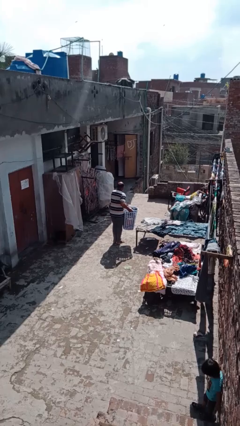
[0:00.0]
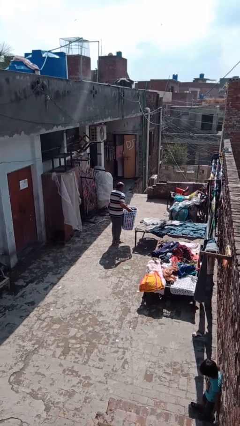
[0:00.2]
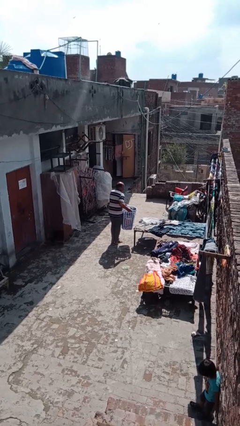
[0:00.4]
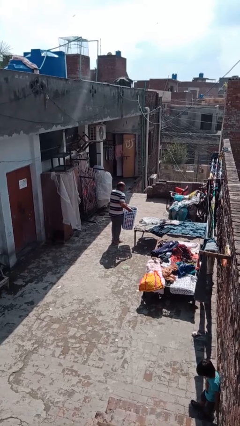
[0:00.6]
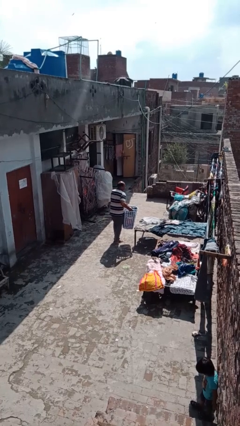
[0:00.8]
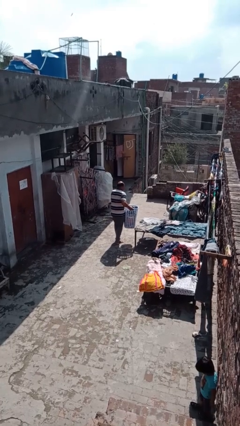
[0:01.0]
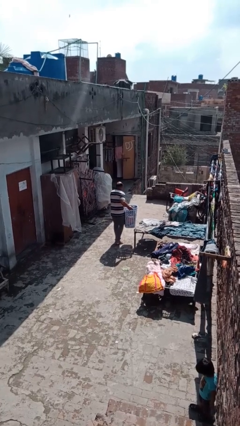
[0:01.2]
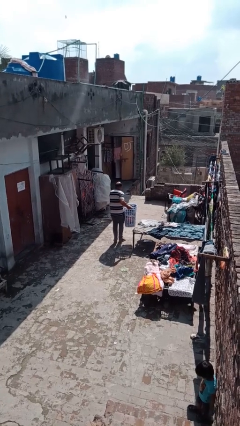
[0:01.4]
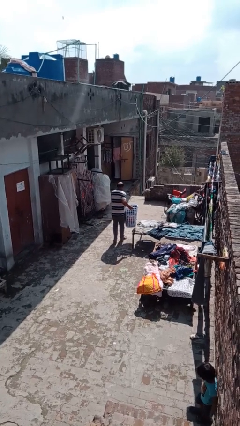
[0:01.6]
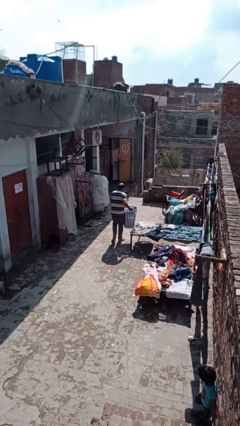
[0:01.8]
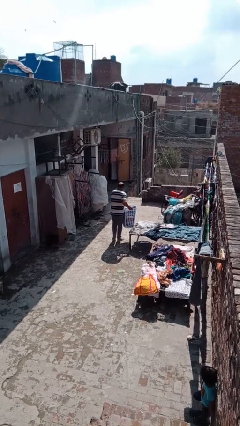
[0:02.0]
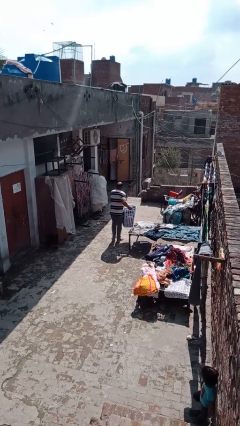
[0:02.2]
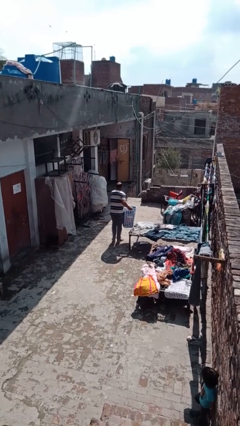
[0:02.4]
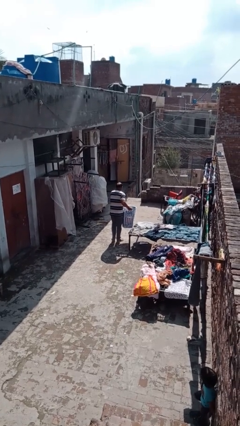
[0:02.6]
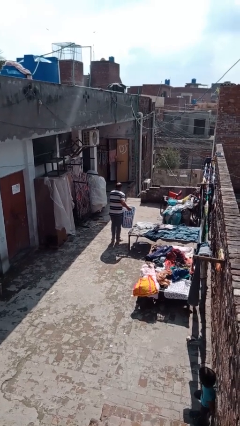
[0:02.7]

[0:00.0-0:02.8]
person carries laundry basket

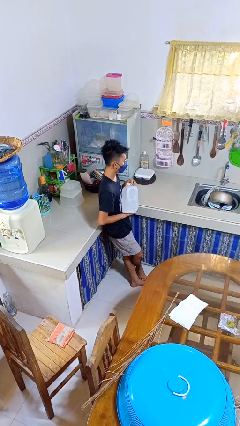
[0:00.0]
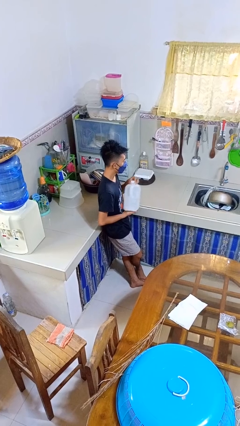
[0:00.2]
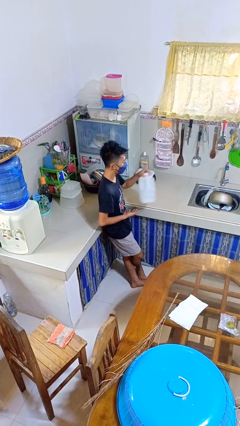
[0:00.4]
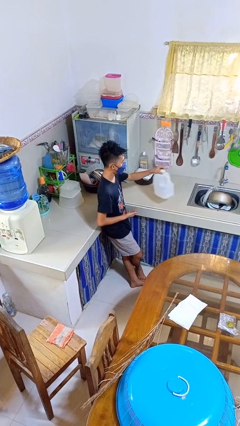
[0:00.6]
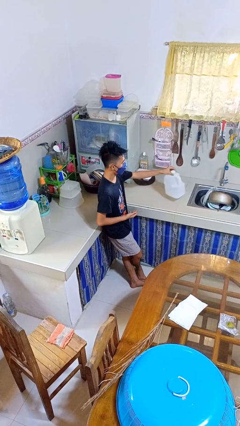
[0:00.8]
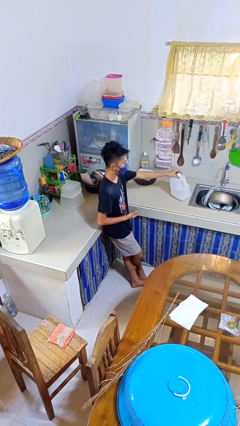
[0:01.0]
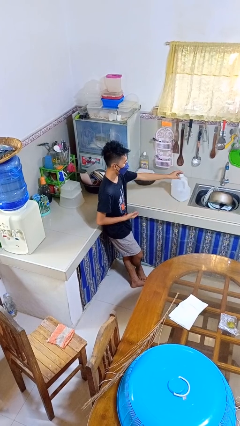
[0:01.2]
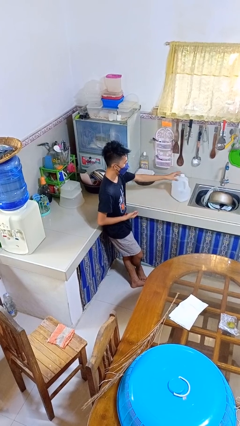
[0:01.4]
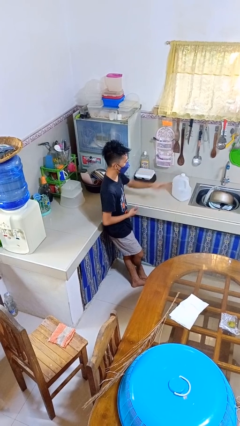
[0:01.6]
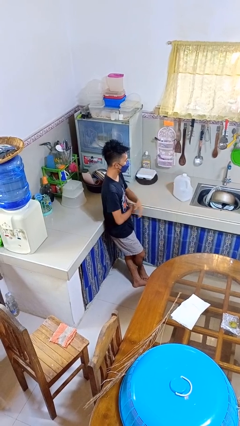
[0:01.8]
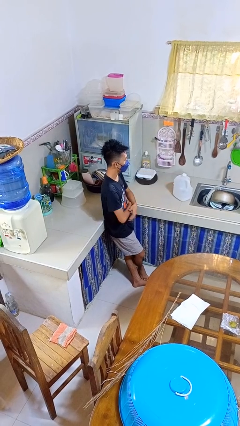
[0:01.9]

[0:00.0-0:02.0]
person puts down object on countertop

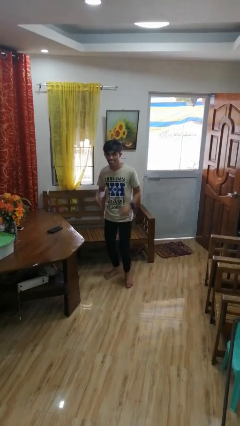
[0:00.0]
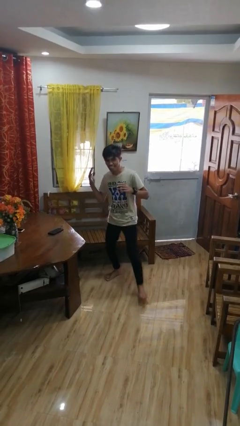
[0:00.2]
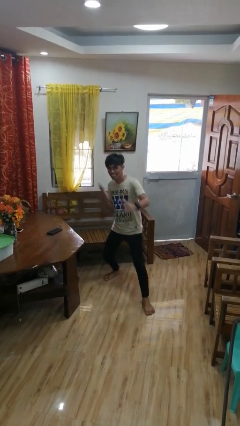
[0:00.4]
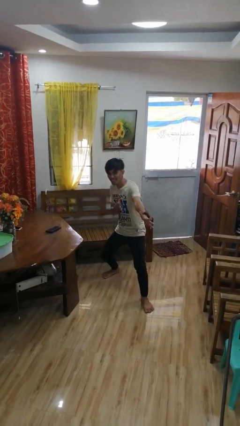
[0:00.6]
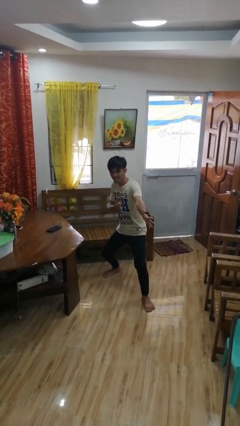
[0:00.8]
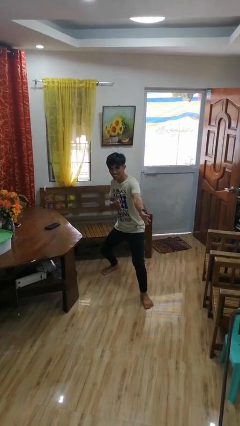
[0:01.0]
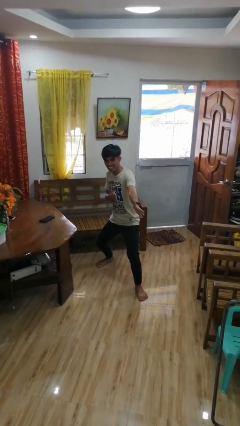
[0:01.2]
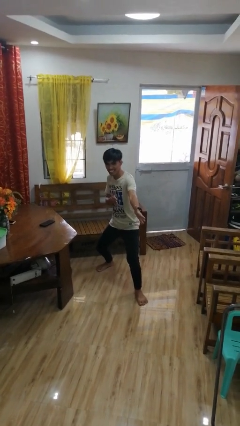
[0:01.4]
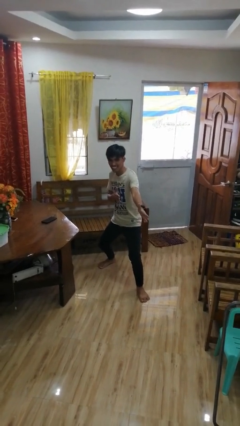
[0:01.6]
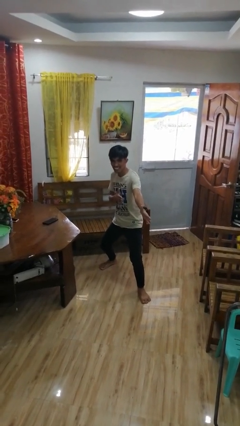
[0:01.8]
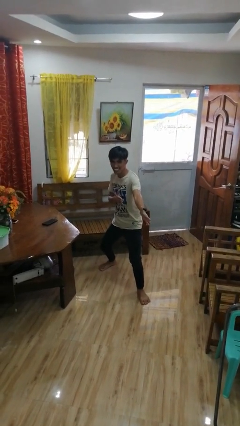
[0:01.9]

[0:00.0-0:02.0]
person karate chop

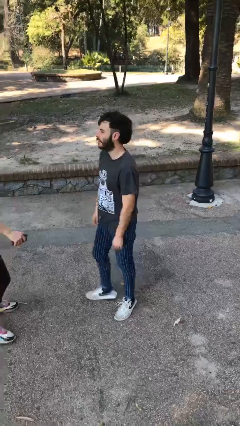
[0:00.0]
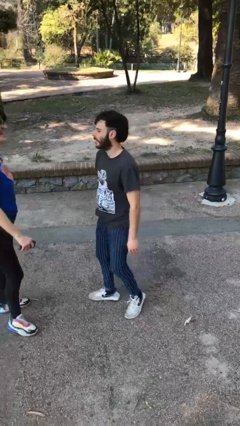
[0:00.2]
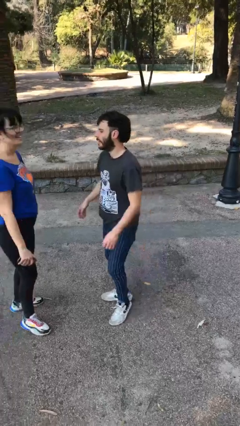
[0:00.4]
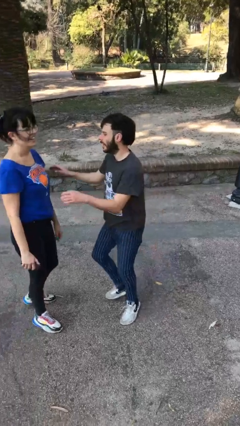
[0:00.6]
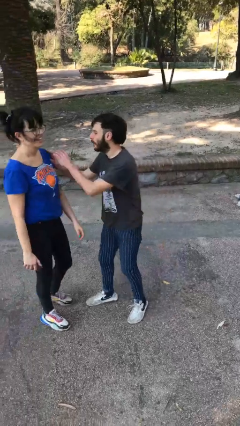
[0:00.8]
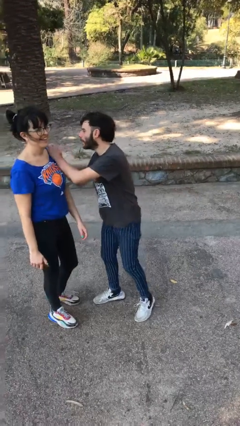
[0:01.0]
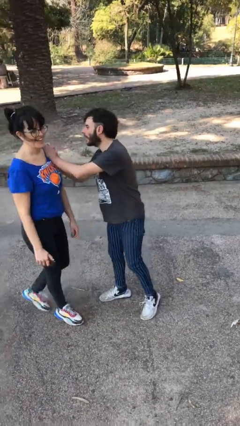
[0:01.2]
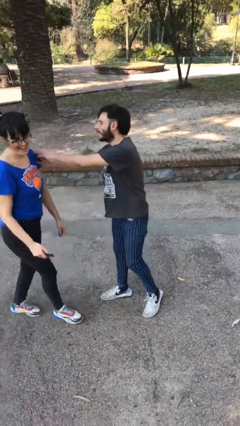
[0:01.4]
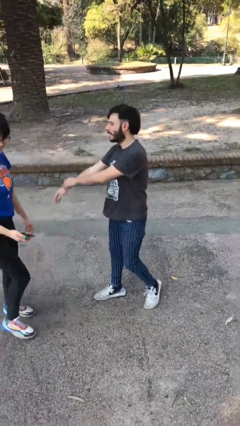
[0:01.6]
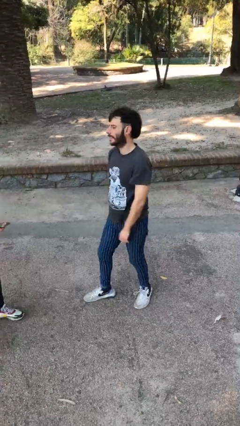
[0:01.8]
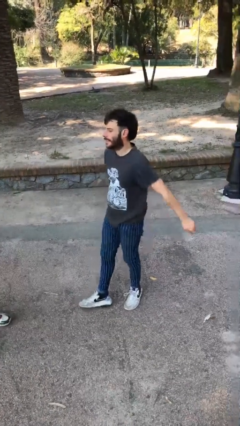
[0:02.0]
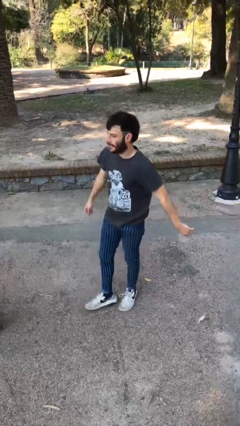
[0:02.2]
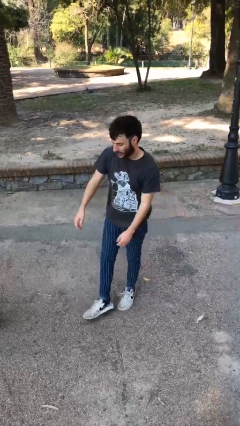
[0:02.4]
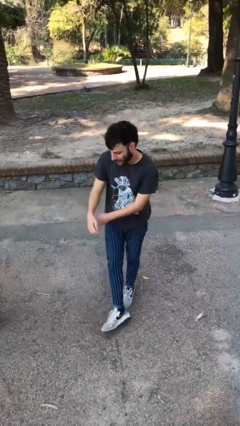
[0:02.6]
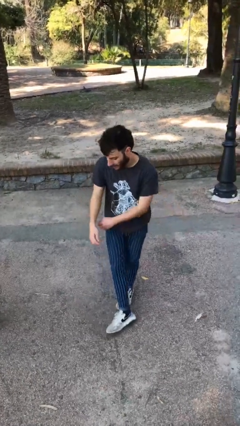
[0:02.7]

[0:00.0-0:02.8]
person shoves person

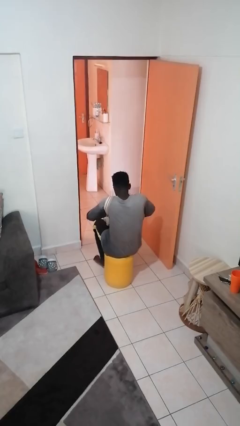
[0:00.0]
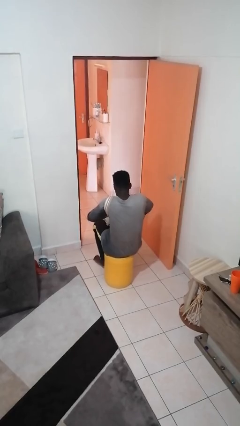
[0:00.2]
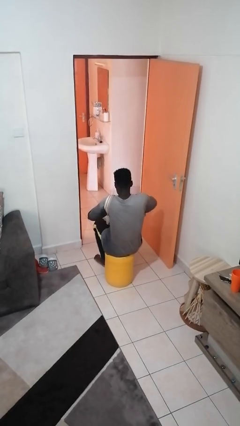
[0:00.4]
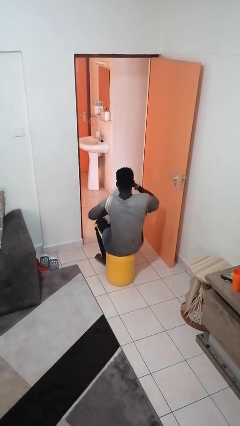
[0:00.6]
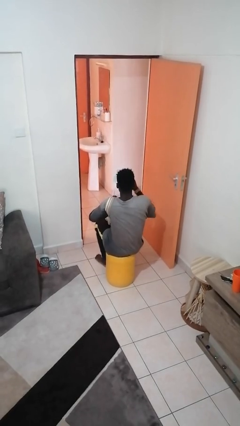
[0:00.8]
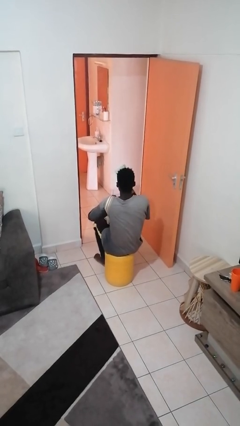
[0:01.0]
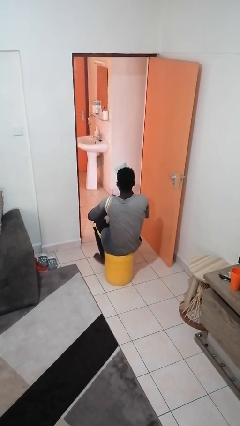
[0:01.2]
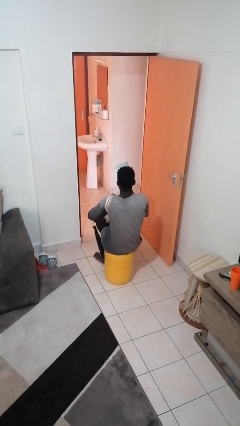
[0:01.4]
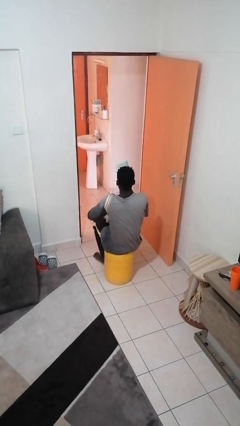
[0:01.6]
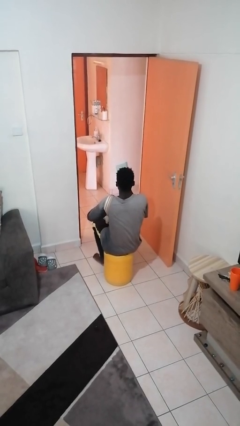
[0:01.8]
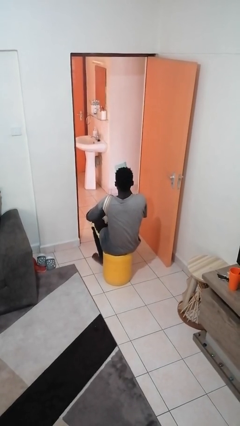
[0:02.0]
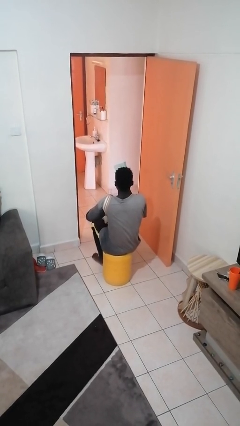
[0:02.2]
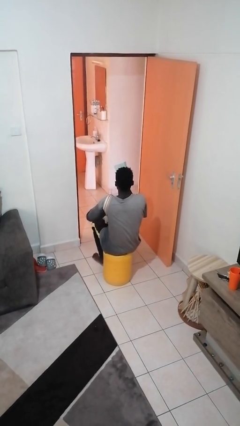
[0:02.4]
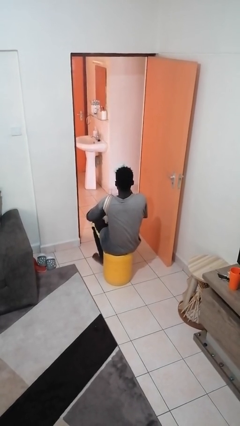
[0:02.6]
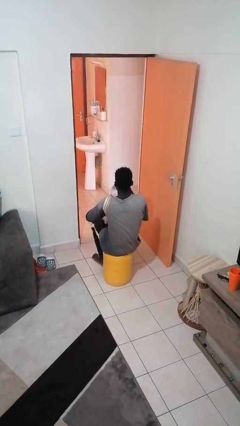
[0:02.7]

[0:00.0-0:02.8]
person takes object from purse

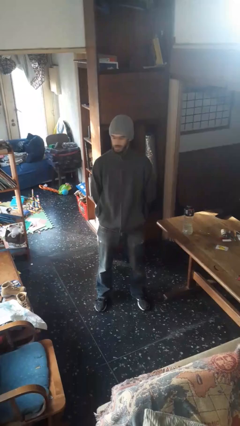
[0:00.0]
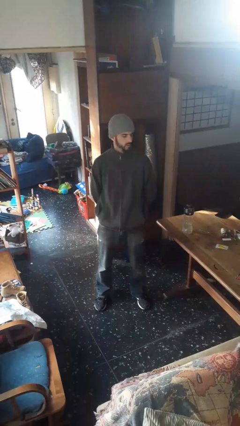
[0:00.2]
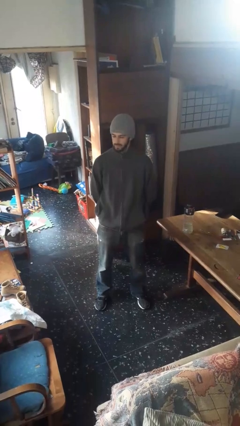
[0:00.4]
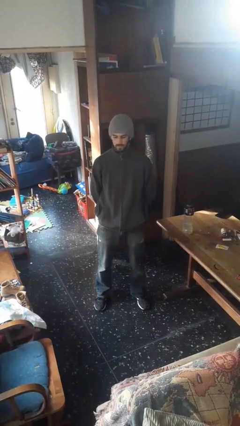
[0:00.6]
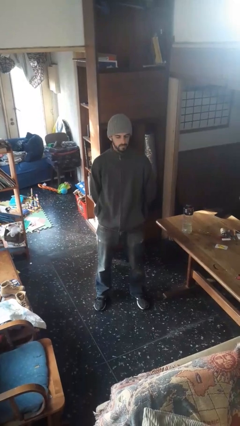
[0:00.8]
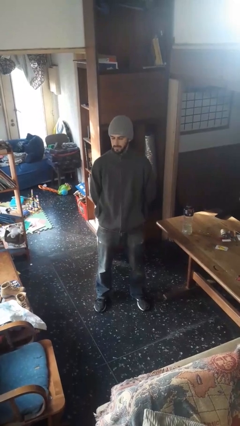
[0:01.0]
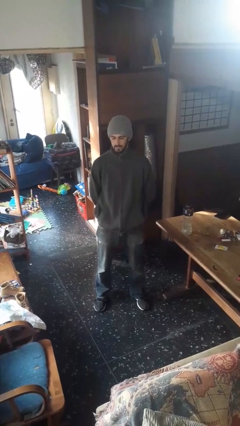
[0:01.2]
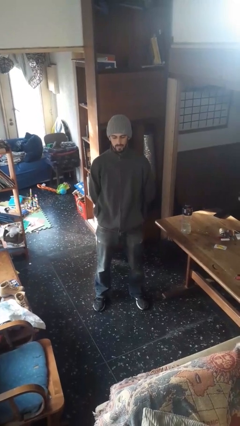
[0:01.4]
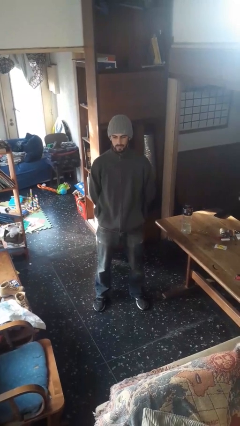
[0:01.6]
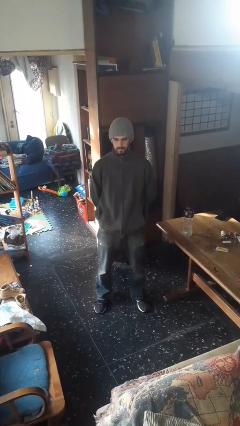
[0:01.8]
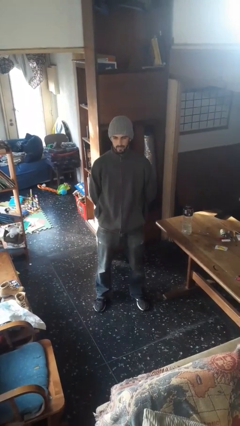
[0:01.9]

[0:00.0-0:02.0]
person shakes head

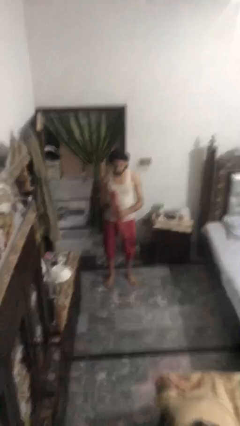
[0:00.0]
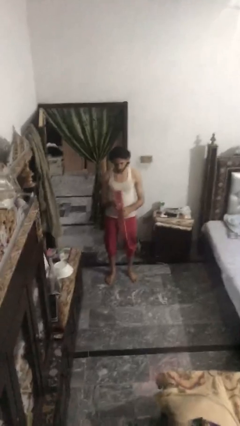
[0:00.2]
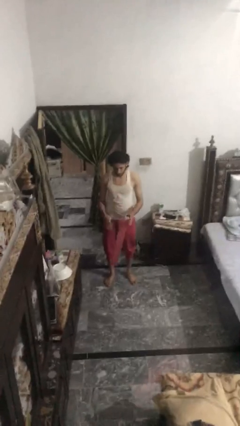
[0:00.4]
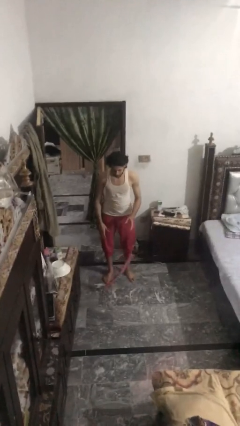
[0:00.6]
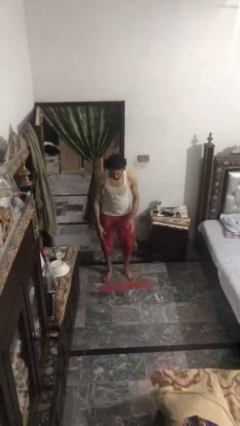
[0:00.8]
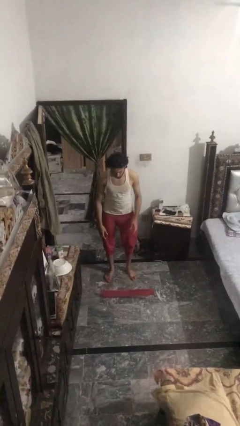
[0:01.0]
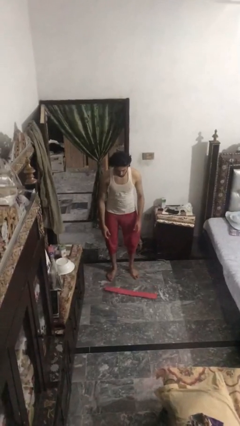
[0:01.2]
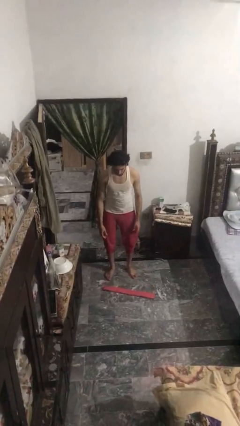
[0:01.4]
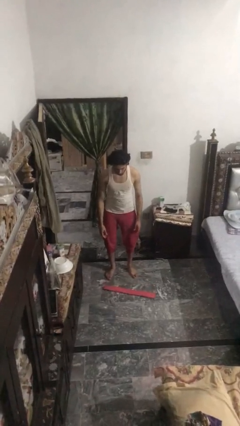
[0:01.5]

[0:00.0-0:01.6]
person drops object

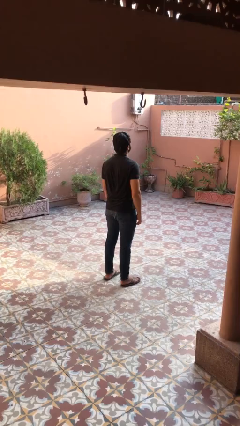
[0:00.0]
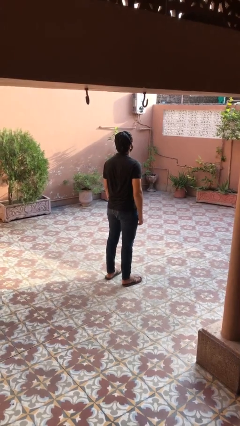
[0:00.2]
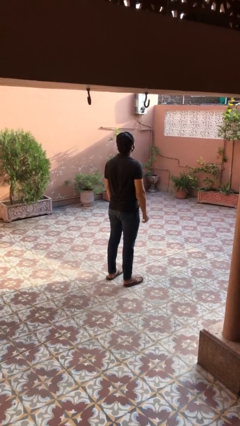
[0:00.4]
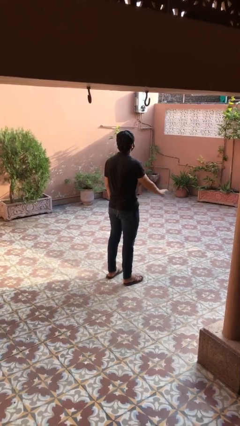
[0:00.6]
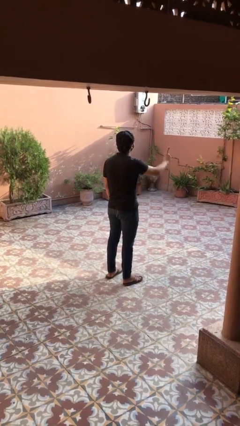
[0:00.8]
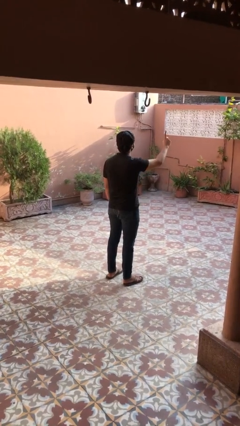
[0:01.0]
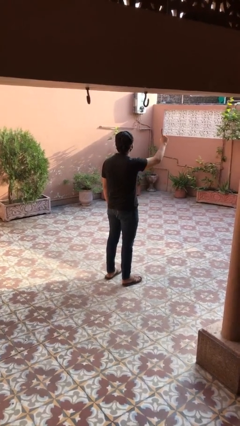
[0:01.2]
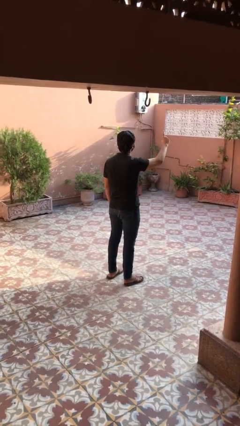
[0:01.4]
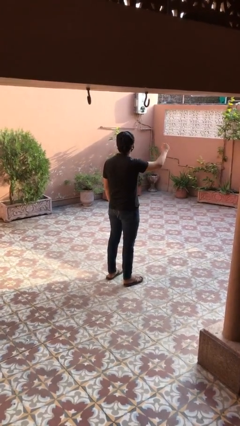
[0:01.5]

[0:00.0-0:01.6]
person gestures number one
